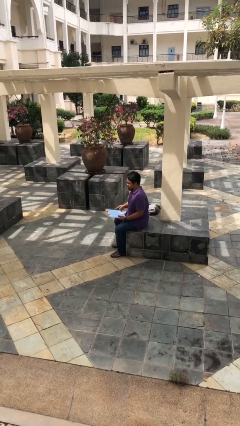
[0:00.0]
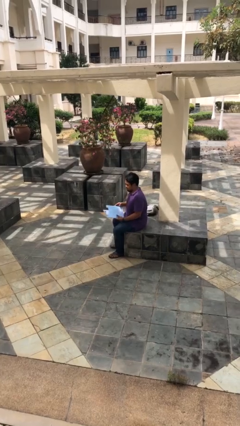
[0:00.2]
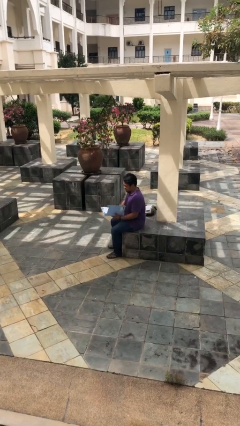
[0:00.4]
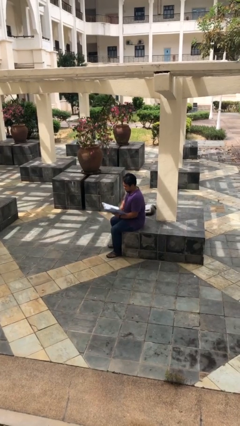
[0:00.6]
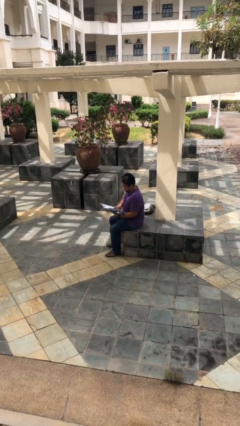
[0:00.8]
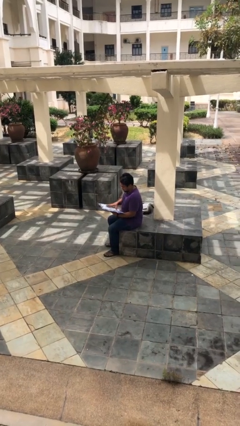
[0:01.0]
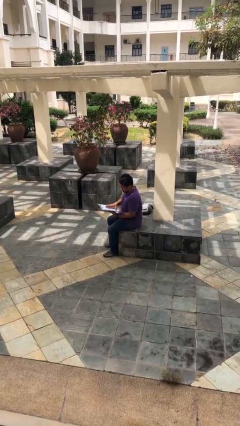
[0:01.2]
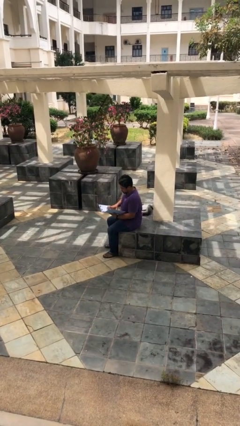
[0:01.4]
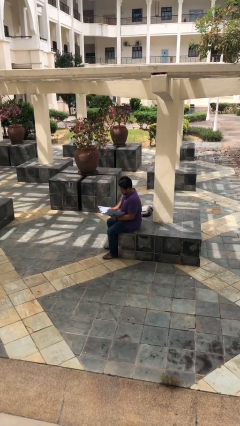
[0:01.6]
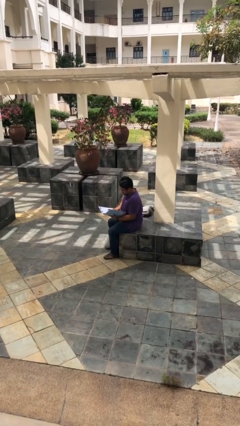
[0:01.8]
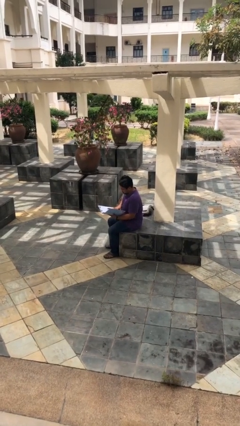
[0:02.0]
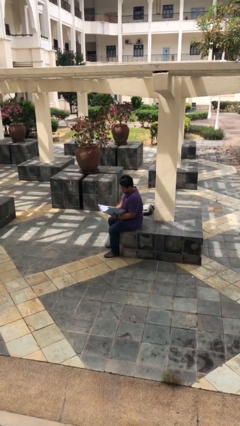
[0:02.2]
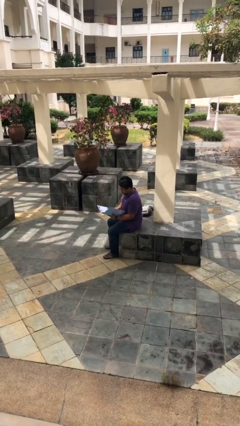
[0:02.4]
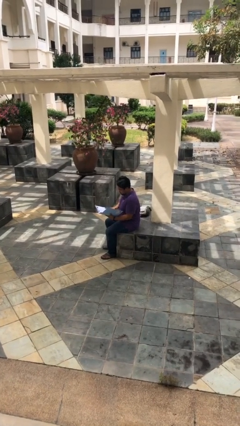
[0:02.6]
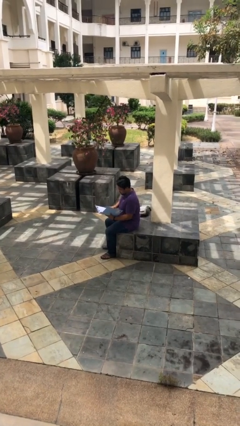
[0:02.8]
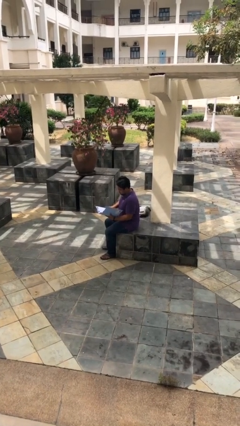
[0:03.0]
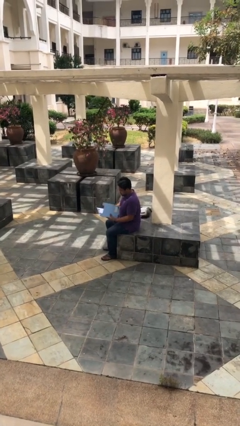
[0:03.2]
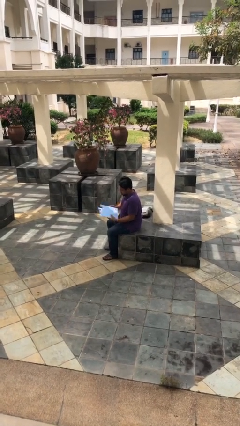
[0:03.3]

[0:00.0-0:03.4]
person reads document

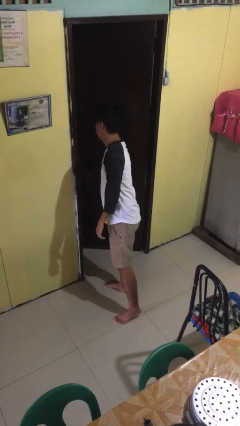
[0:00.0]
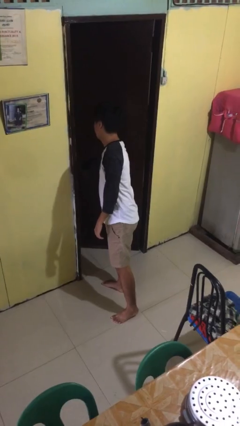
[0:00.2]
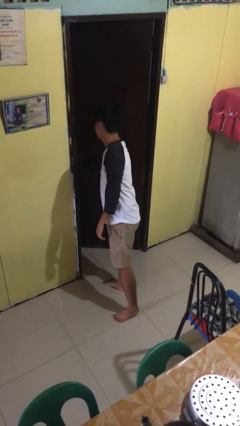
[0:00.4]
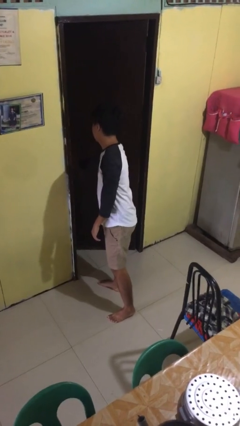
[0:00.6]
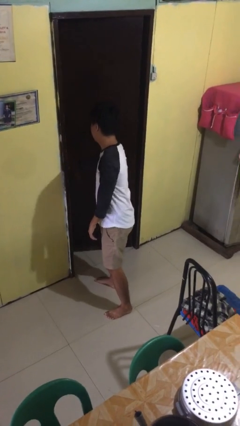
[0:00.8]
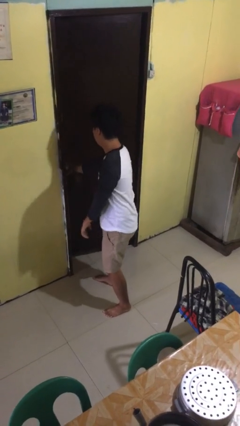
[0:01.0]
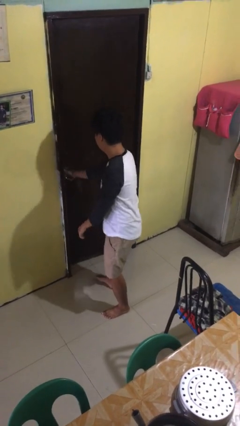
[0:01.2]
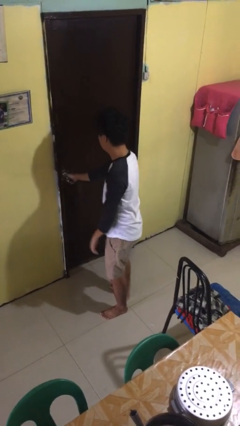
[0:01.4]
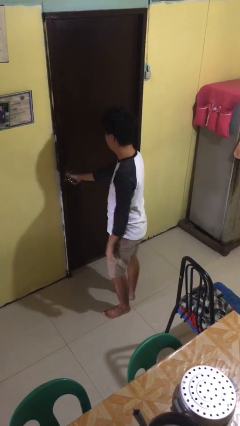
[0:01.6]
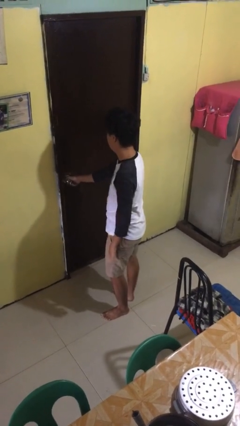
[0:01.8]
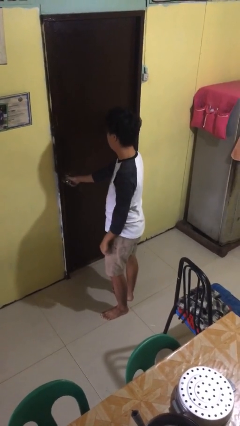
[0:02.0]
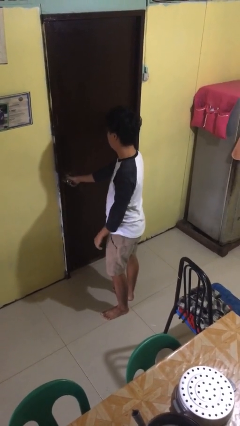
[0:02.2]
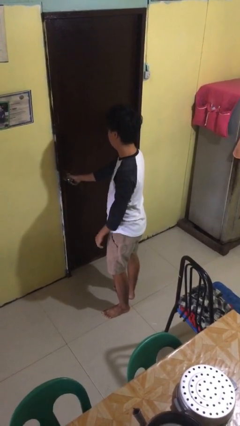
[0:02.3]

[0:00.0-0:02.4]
person closes facility door

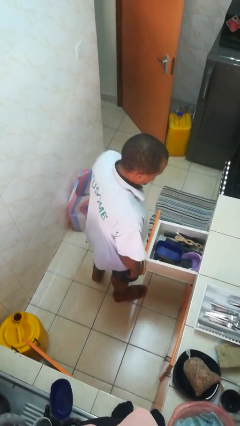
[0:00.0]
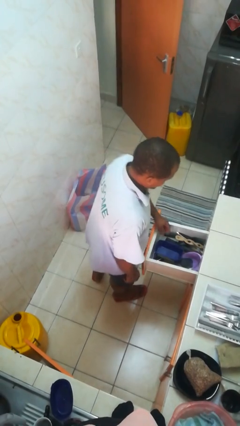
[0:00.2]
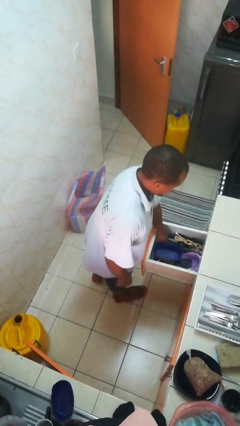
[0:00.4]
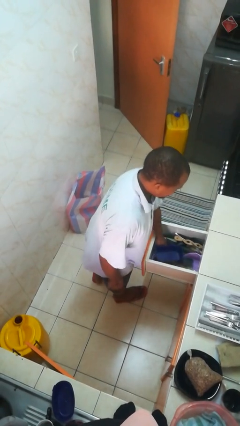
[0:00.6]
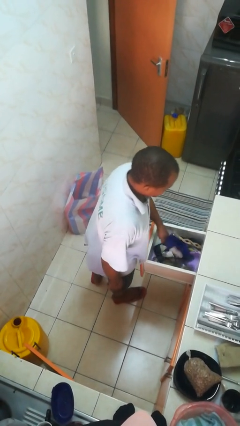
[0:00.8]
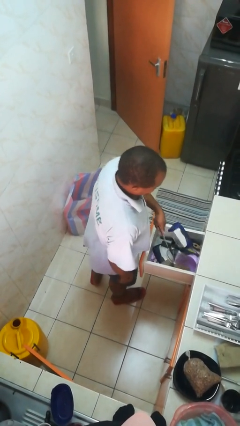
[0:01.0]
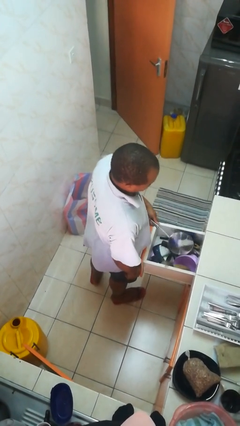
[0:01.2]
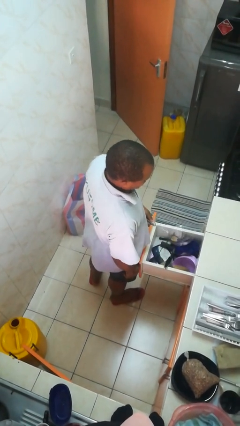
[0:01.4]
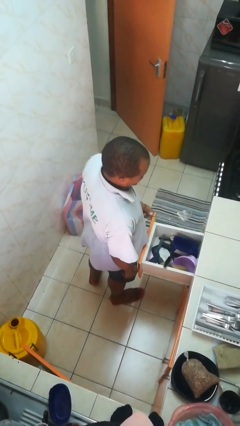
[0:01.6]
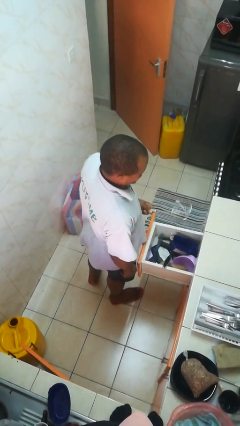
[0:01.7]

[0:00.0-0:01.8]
person takes object from kitchen drawer

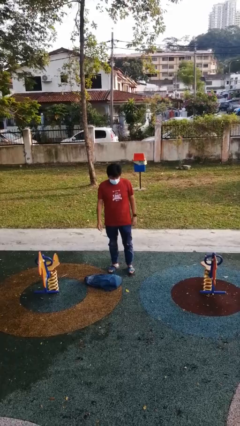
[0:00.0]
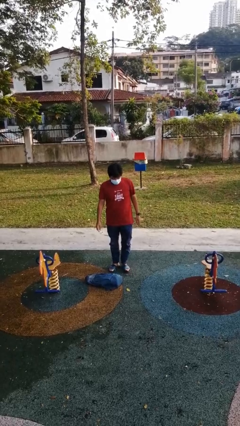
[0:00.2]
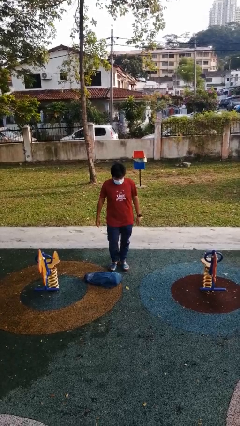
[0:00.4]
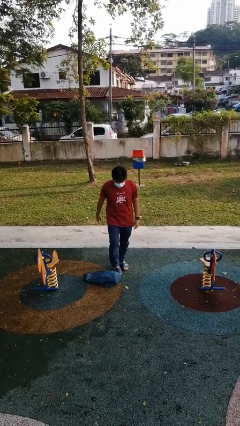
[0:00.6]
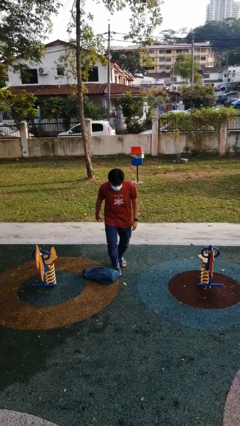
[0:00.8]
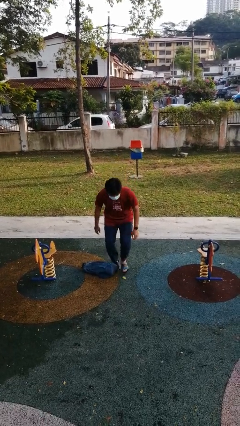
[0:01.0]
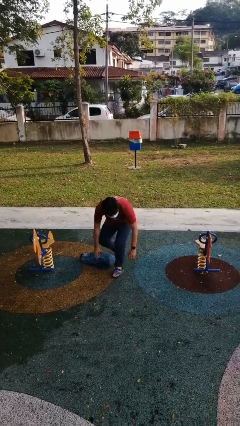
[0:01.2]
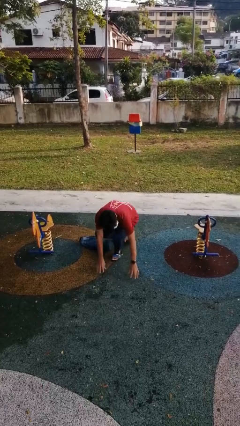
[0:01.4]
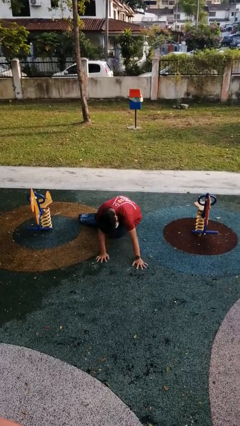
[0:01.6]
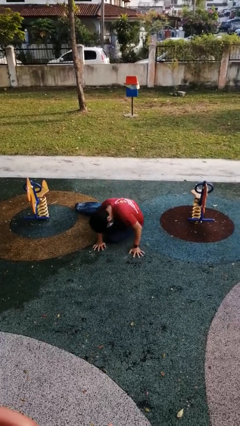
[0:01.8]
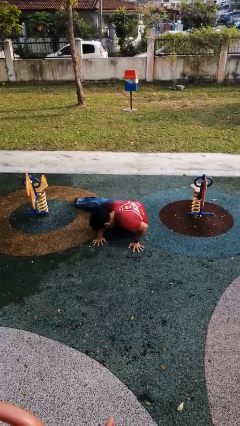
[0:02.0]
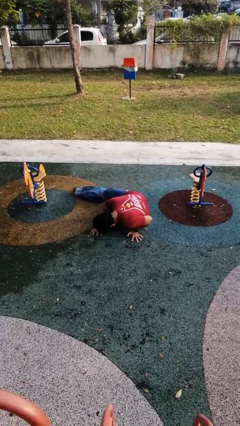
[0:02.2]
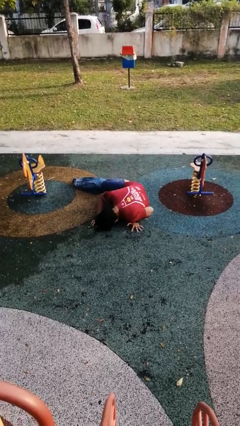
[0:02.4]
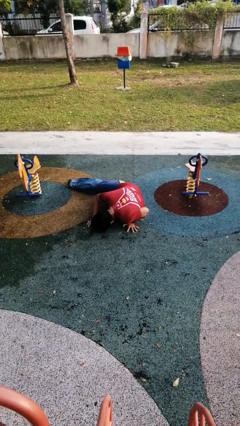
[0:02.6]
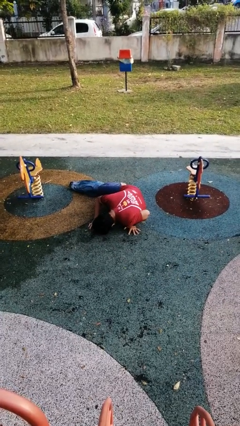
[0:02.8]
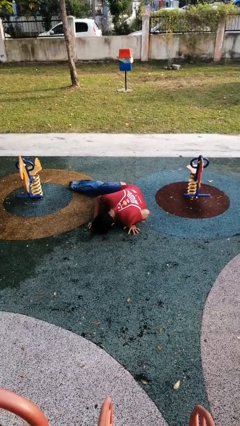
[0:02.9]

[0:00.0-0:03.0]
person trips on object on floor

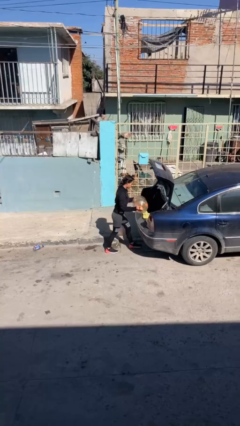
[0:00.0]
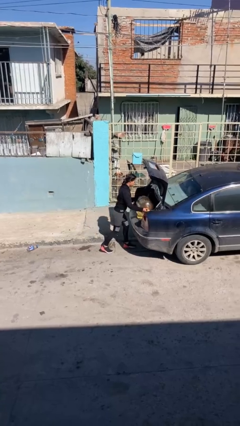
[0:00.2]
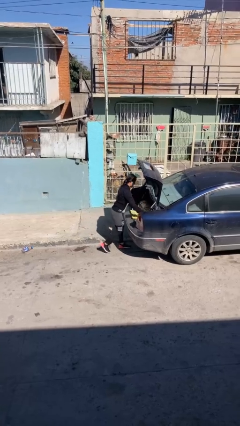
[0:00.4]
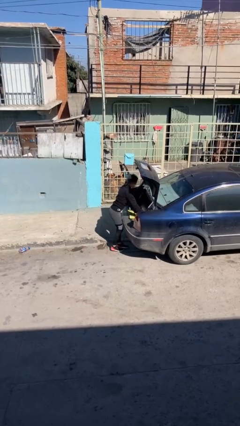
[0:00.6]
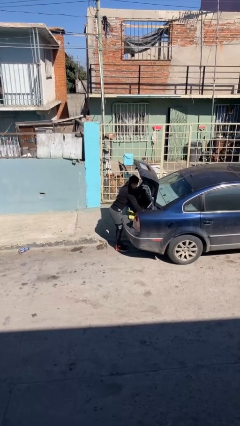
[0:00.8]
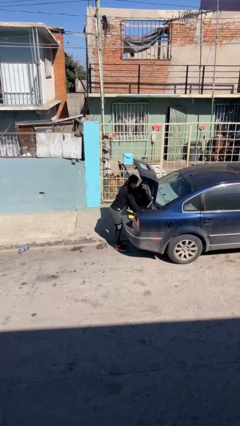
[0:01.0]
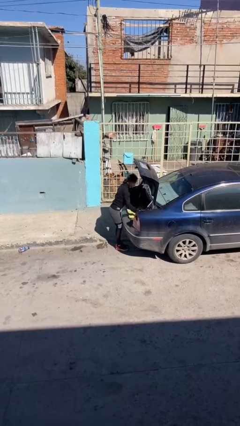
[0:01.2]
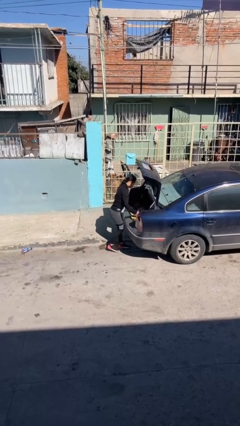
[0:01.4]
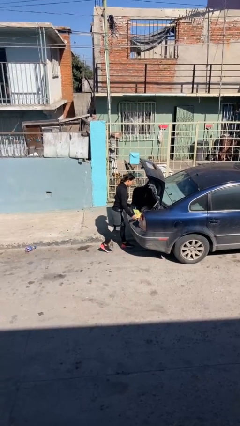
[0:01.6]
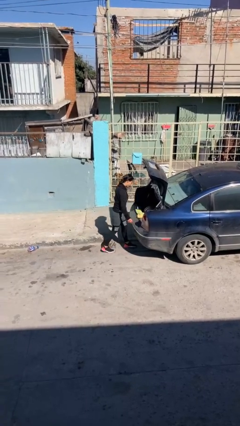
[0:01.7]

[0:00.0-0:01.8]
person loads car

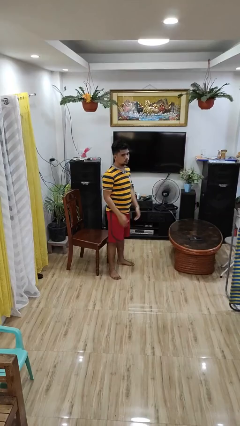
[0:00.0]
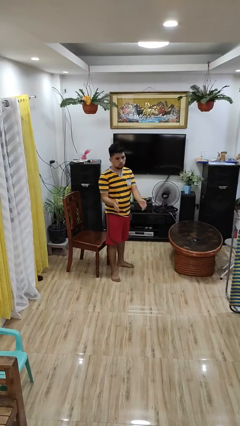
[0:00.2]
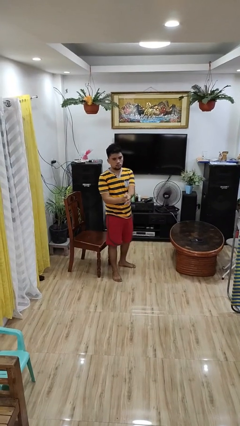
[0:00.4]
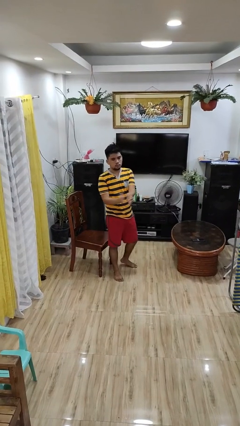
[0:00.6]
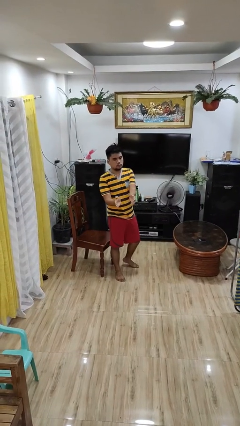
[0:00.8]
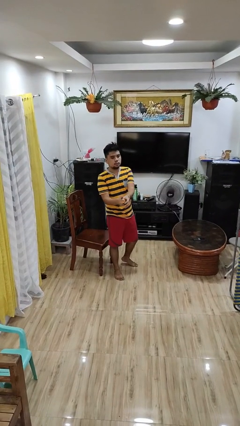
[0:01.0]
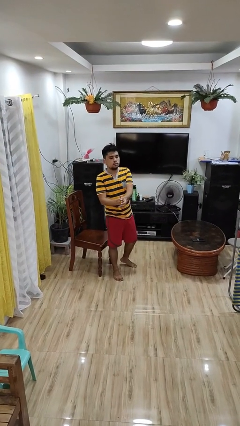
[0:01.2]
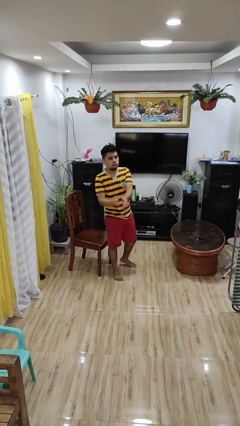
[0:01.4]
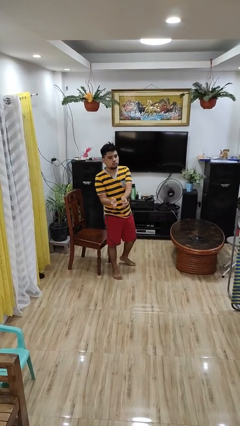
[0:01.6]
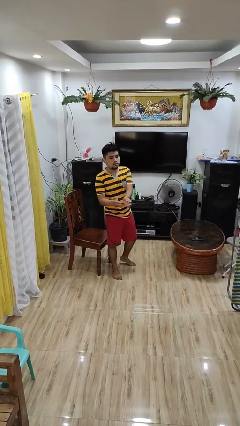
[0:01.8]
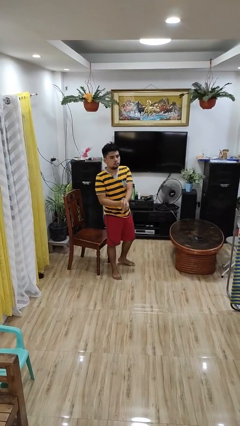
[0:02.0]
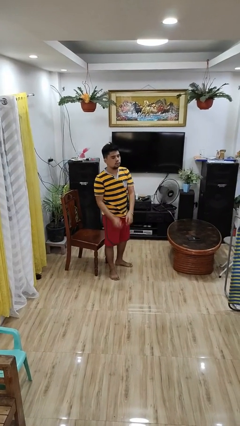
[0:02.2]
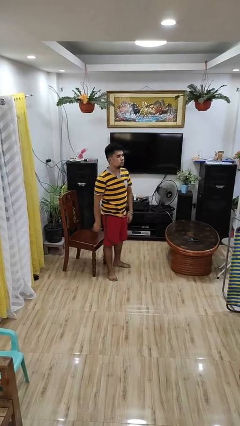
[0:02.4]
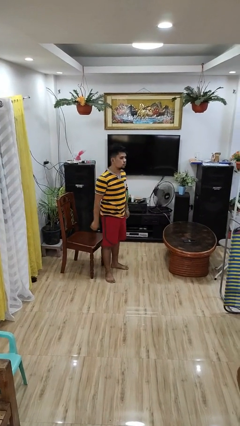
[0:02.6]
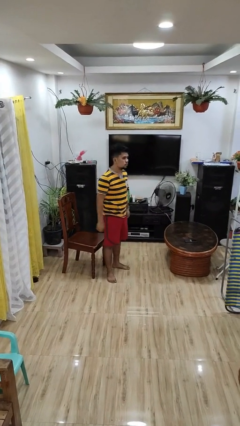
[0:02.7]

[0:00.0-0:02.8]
person claps hands

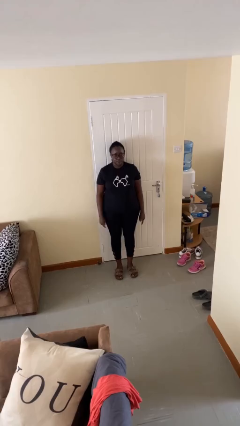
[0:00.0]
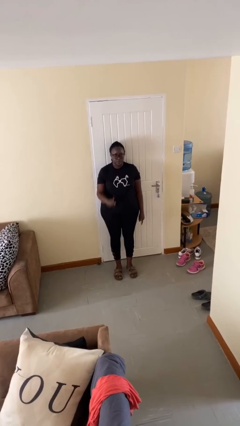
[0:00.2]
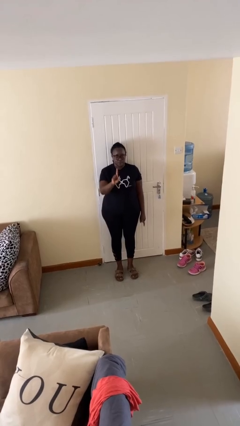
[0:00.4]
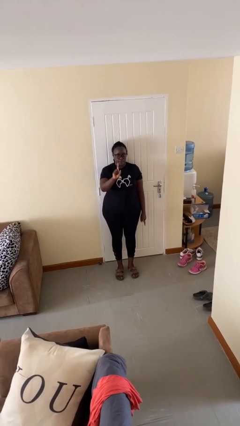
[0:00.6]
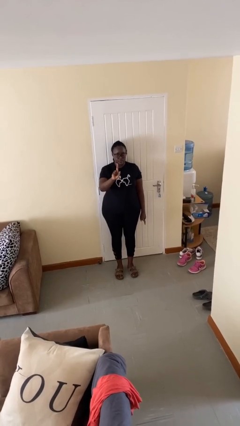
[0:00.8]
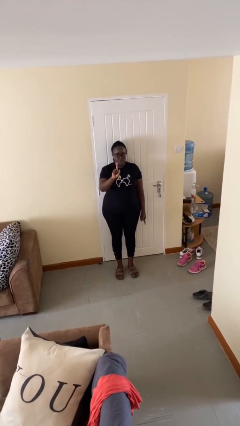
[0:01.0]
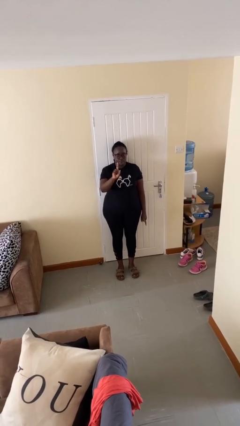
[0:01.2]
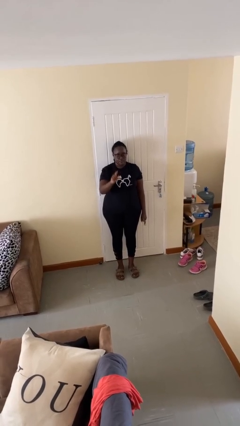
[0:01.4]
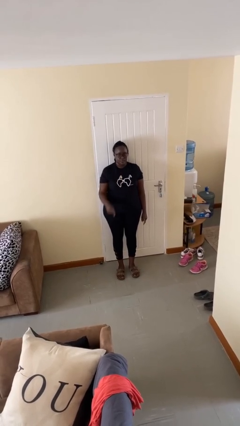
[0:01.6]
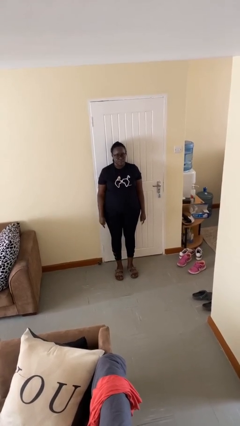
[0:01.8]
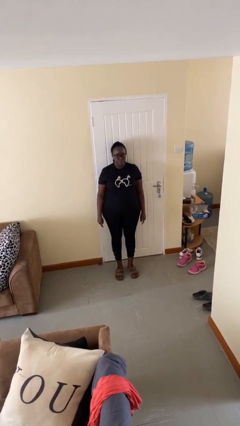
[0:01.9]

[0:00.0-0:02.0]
person gestures number one
